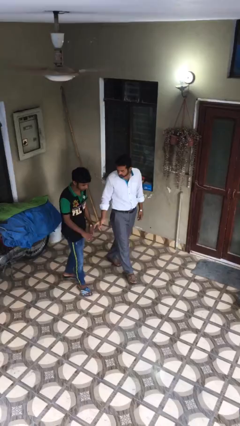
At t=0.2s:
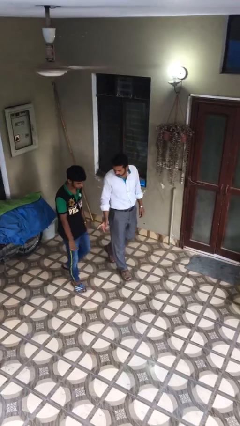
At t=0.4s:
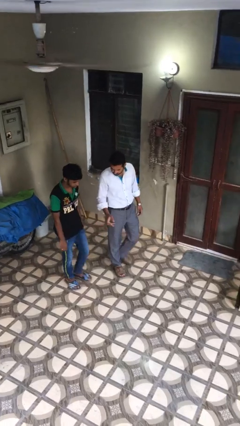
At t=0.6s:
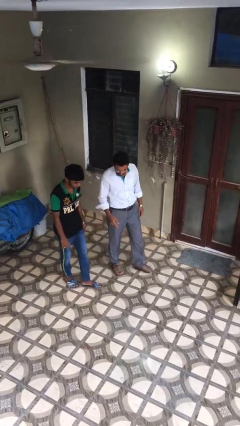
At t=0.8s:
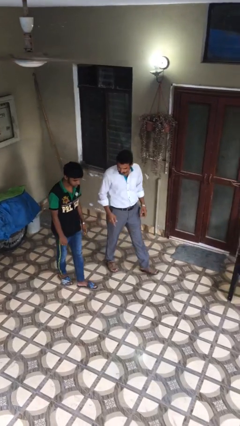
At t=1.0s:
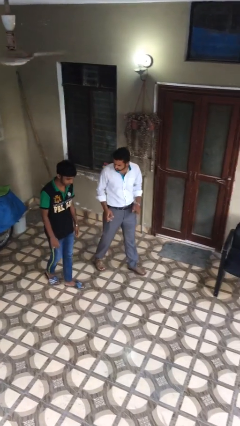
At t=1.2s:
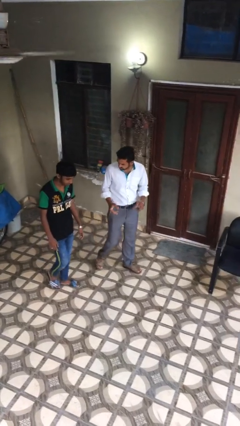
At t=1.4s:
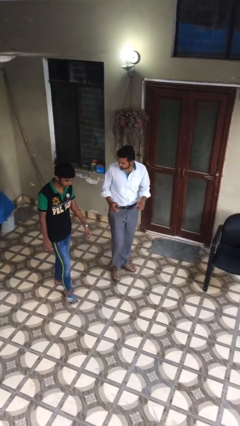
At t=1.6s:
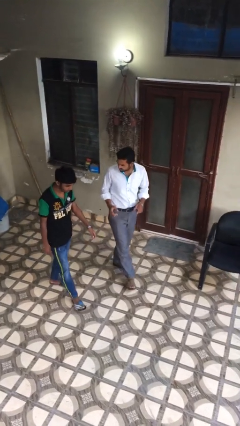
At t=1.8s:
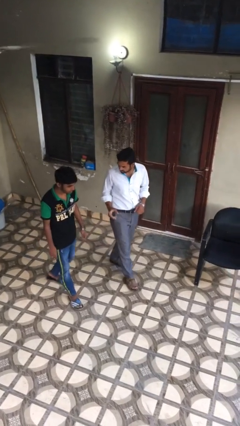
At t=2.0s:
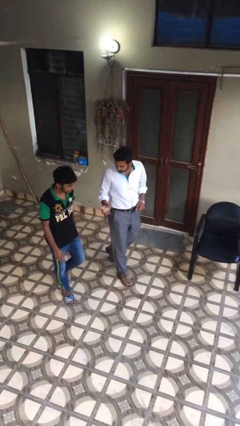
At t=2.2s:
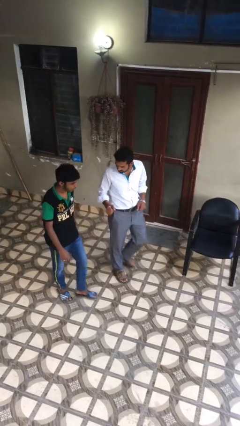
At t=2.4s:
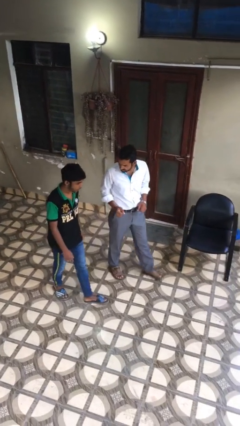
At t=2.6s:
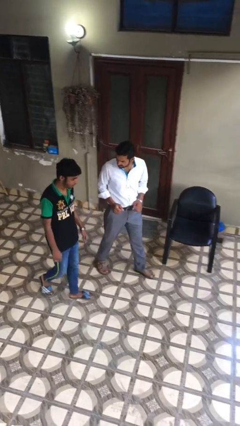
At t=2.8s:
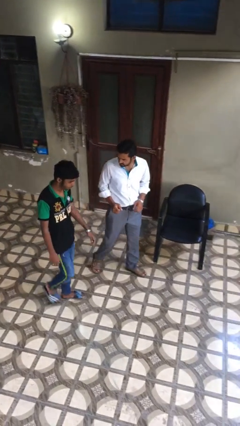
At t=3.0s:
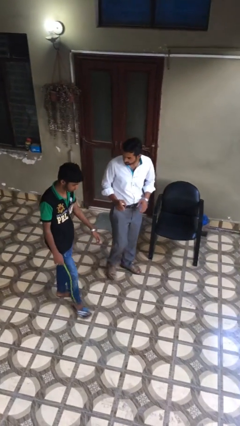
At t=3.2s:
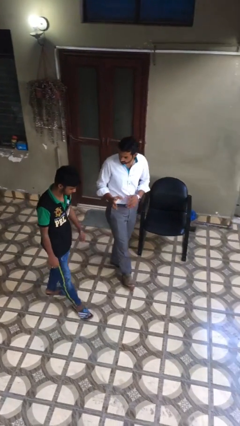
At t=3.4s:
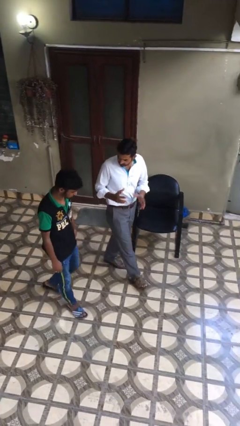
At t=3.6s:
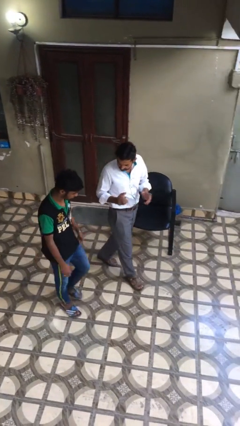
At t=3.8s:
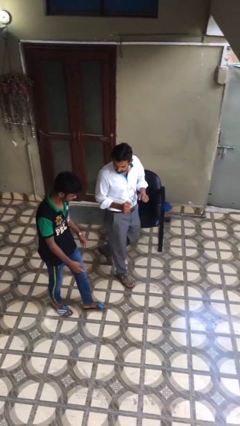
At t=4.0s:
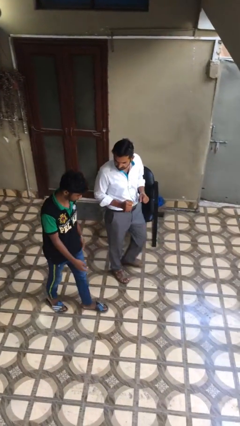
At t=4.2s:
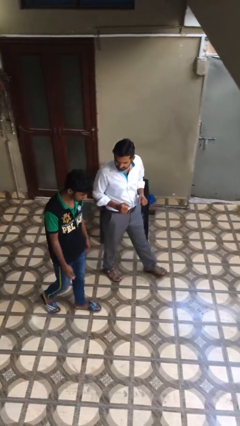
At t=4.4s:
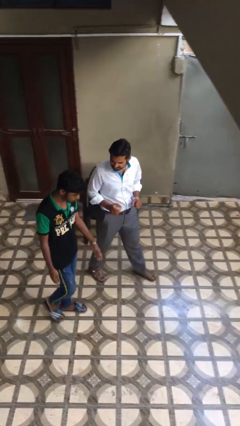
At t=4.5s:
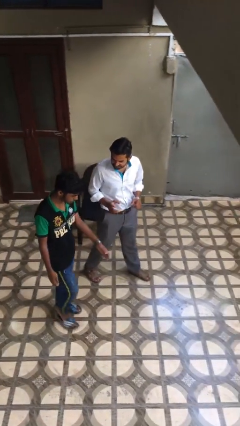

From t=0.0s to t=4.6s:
person talks to person

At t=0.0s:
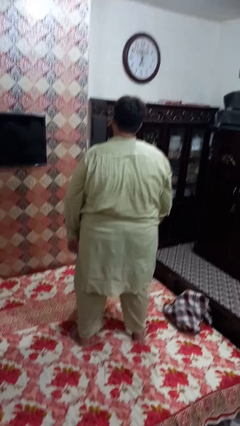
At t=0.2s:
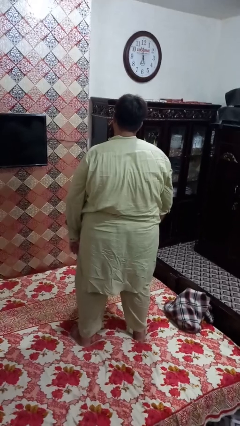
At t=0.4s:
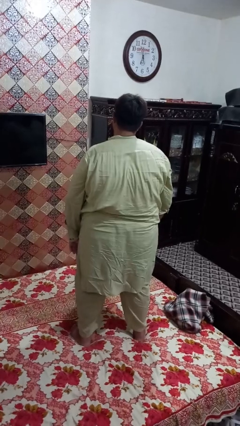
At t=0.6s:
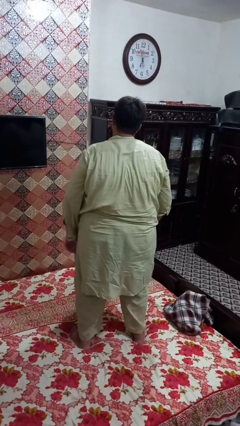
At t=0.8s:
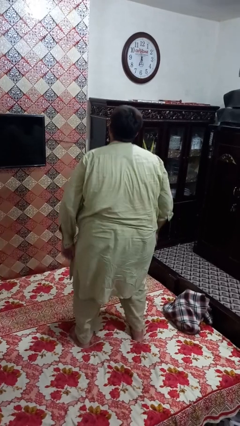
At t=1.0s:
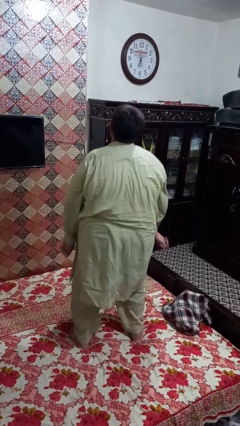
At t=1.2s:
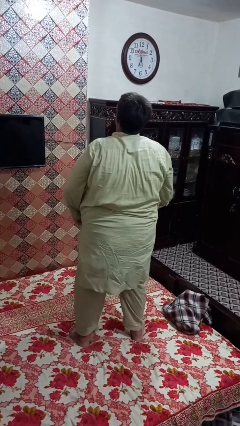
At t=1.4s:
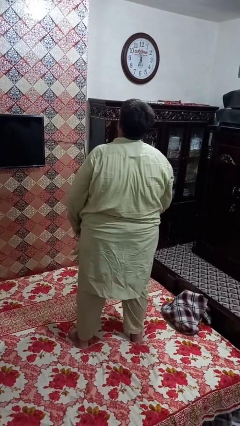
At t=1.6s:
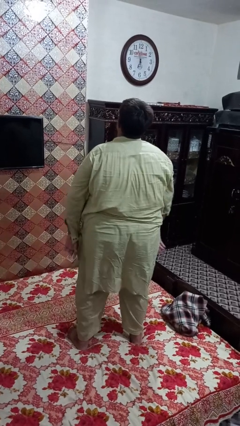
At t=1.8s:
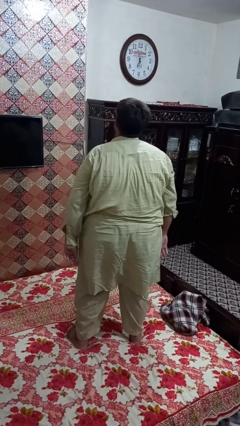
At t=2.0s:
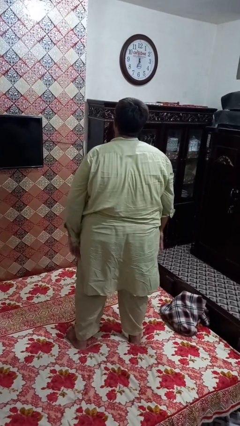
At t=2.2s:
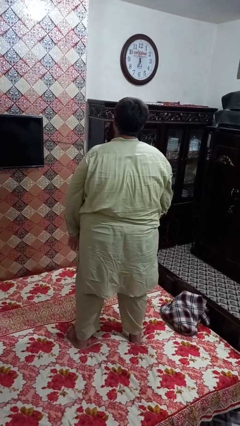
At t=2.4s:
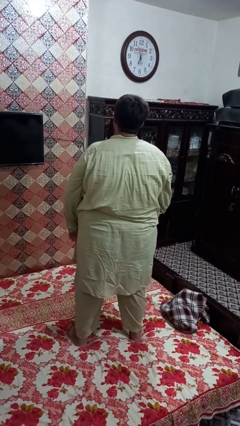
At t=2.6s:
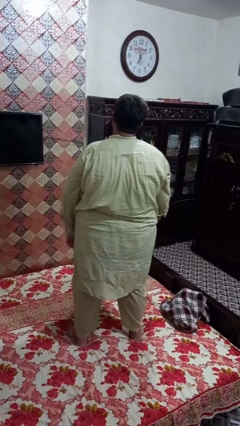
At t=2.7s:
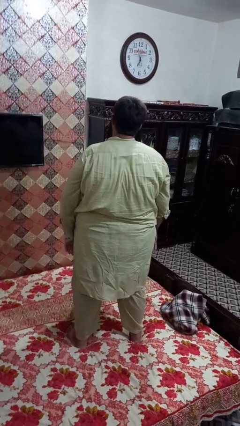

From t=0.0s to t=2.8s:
person jumps on bed

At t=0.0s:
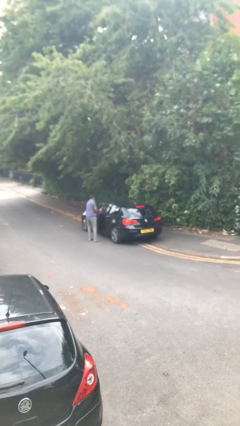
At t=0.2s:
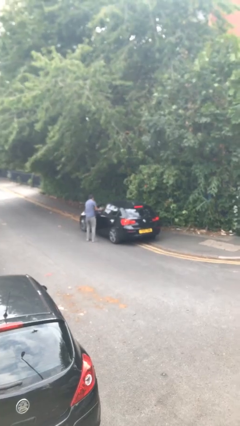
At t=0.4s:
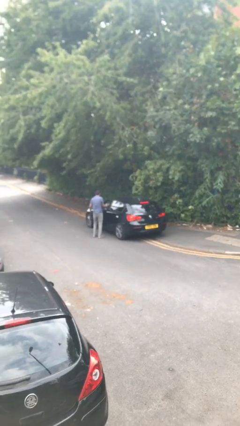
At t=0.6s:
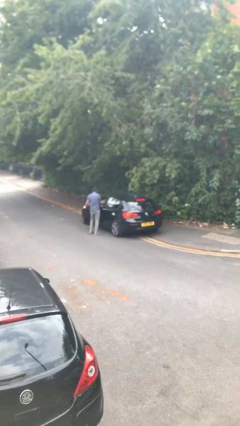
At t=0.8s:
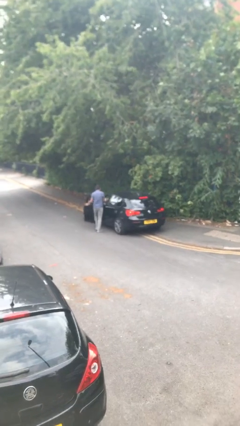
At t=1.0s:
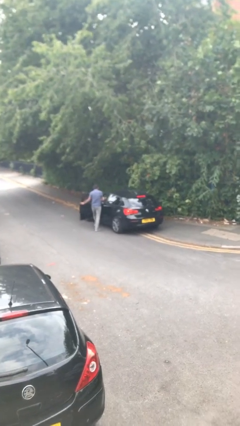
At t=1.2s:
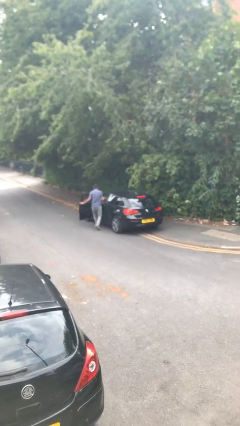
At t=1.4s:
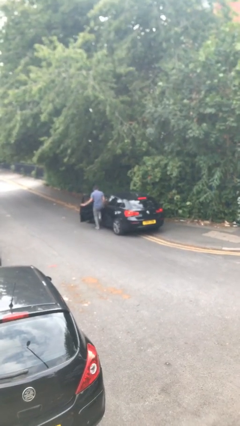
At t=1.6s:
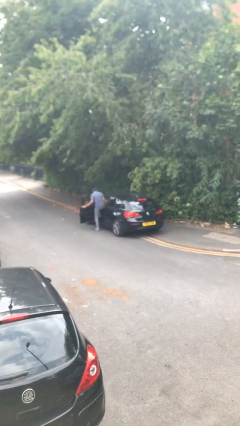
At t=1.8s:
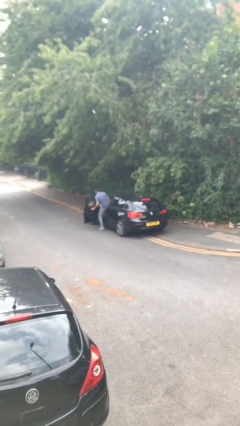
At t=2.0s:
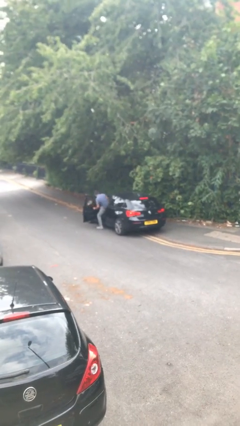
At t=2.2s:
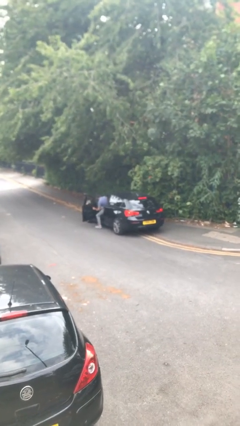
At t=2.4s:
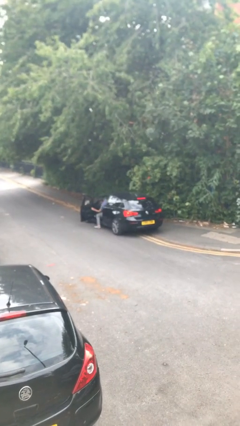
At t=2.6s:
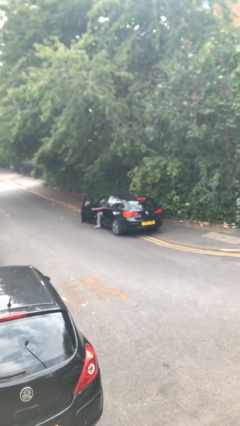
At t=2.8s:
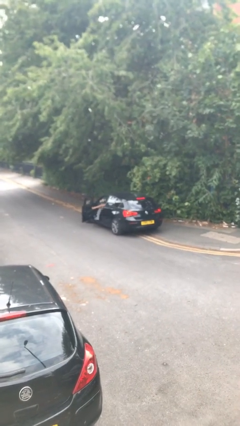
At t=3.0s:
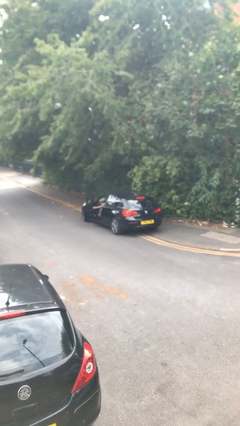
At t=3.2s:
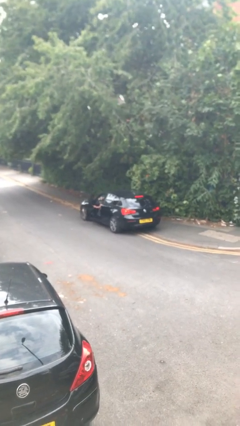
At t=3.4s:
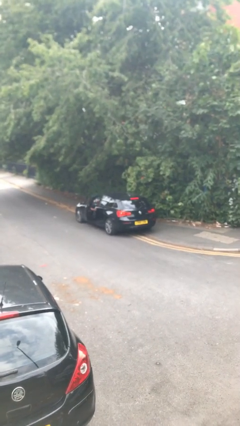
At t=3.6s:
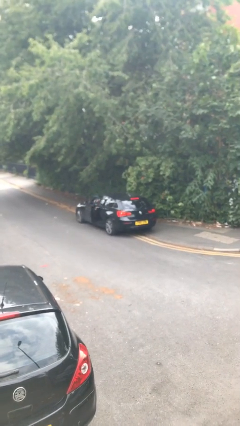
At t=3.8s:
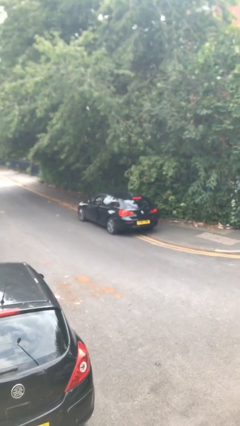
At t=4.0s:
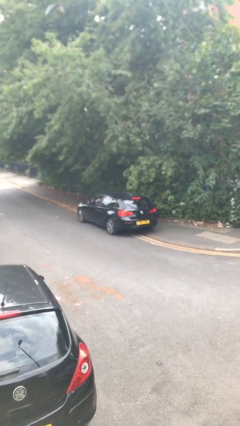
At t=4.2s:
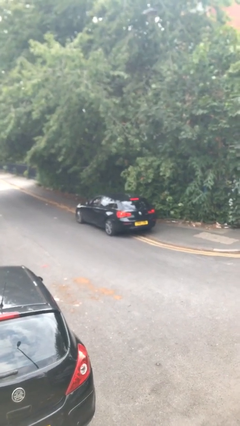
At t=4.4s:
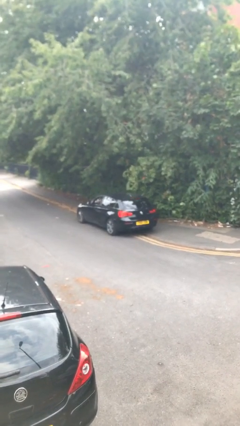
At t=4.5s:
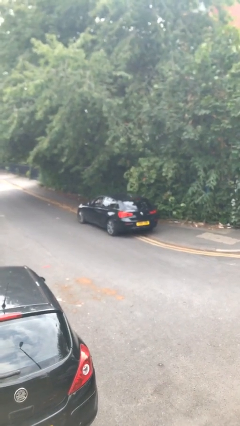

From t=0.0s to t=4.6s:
car picks up person

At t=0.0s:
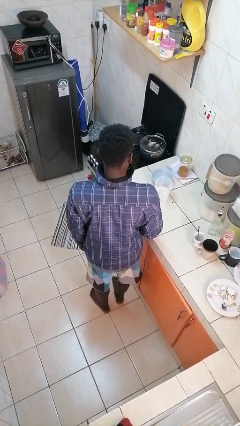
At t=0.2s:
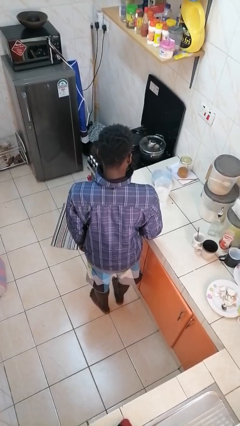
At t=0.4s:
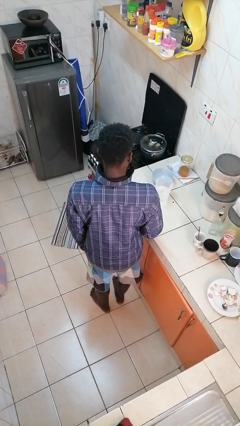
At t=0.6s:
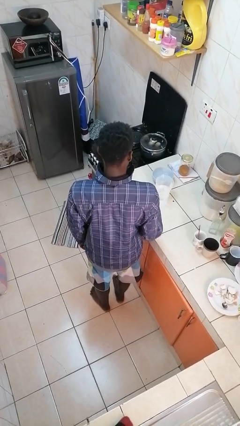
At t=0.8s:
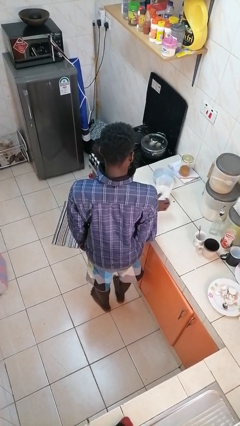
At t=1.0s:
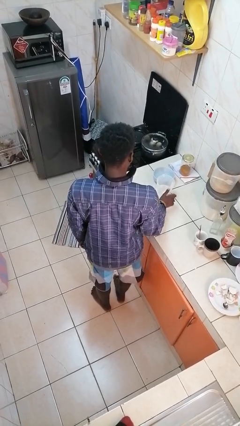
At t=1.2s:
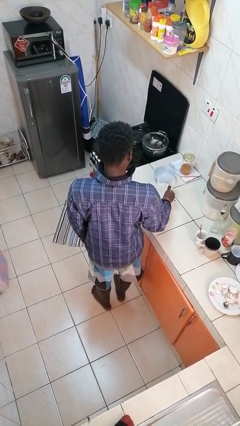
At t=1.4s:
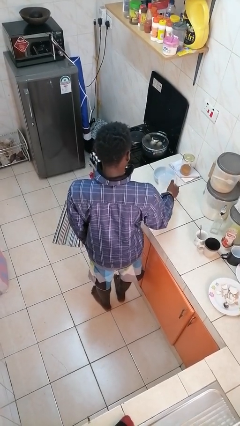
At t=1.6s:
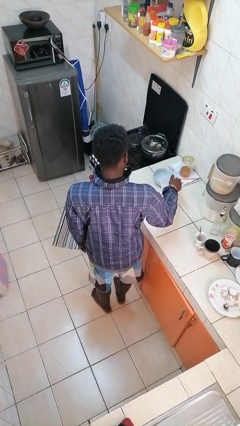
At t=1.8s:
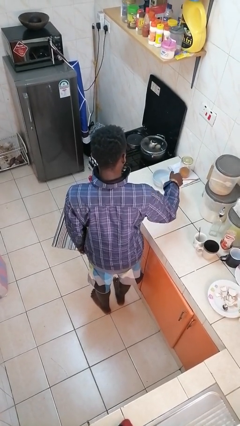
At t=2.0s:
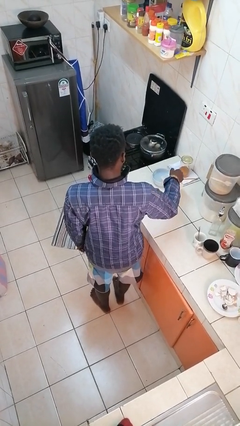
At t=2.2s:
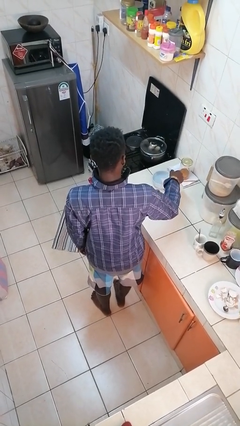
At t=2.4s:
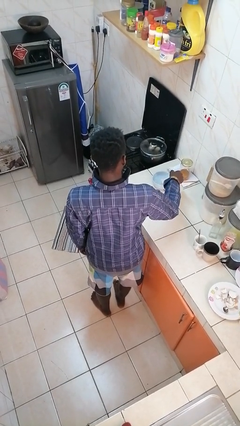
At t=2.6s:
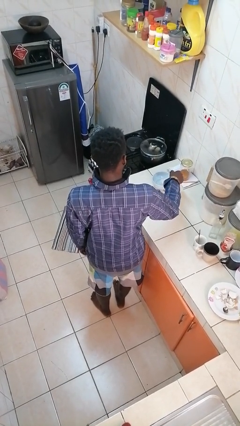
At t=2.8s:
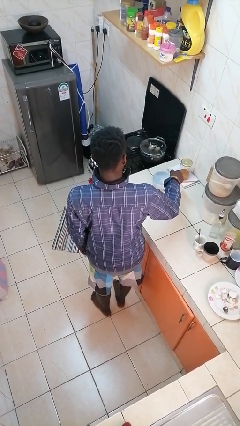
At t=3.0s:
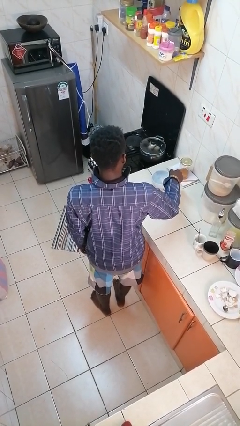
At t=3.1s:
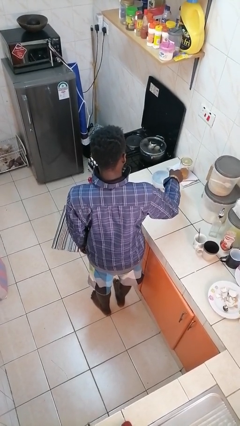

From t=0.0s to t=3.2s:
person pours into bowl

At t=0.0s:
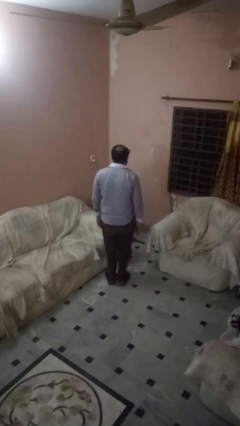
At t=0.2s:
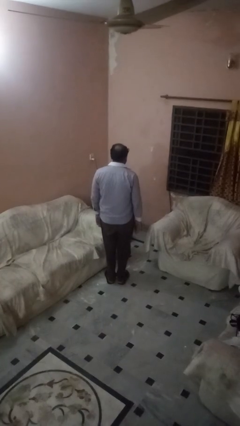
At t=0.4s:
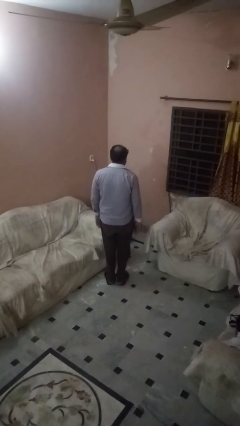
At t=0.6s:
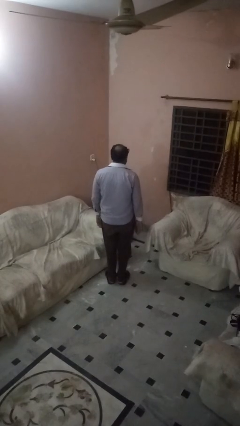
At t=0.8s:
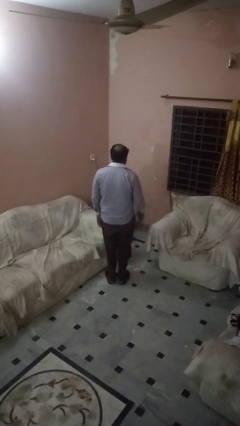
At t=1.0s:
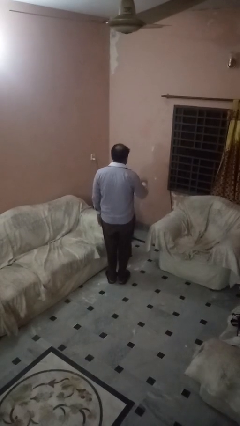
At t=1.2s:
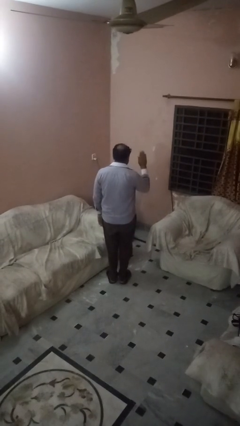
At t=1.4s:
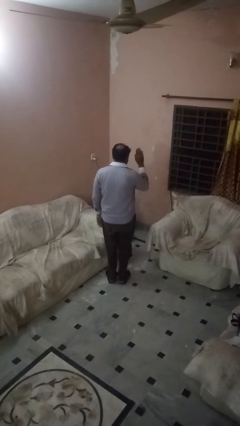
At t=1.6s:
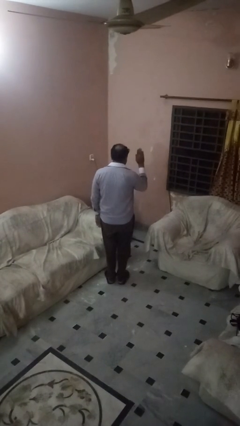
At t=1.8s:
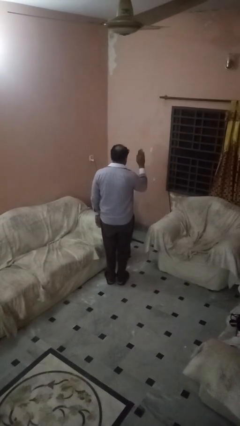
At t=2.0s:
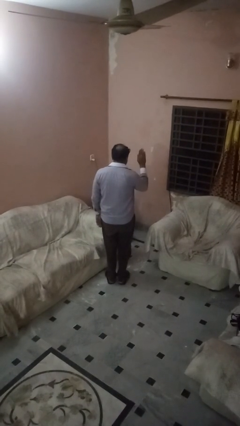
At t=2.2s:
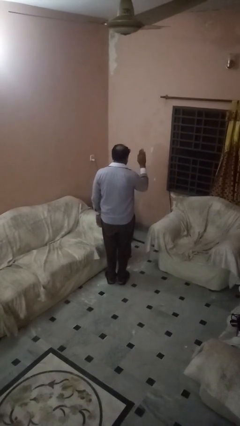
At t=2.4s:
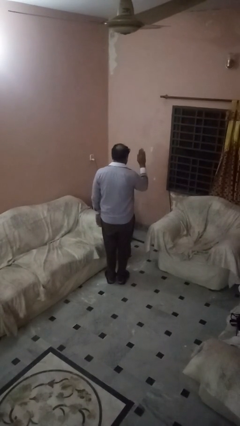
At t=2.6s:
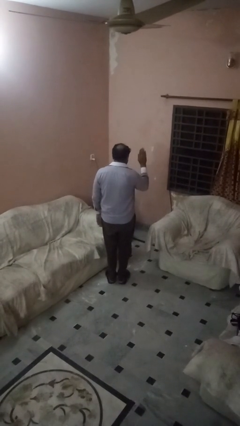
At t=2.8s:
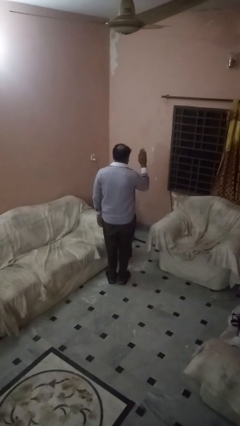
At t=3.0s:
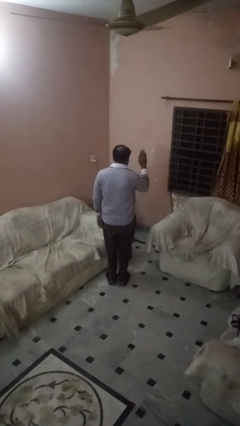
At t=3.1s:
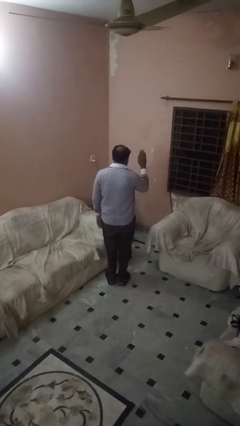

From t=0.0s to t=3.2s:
person gestures stop
